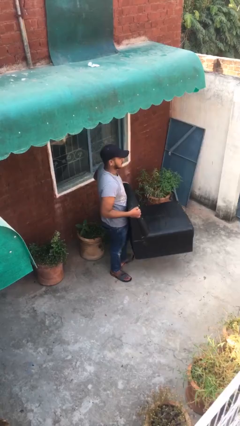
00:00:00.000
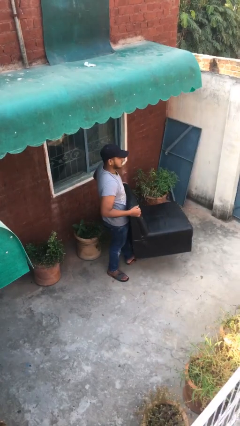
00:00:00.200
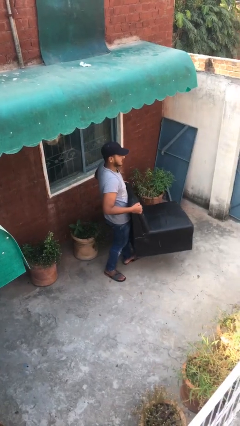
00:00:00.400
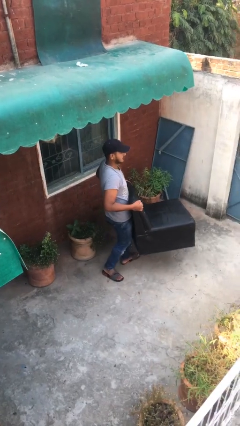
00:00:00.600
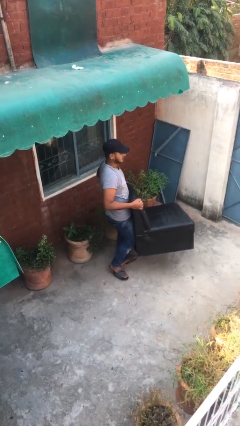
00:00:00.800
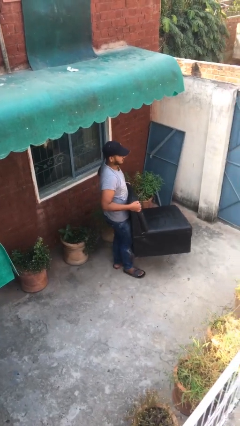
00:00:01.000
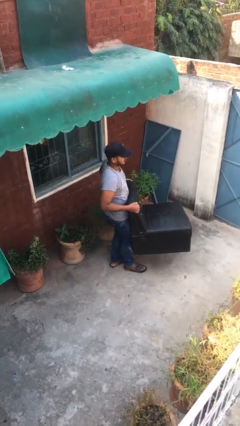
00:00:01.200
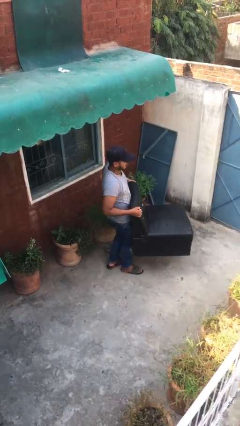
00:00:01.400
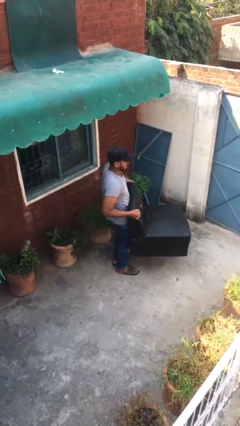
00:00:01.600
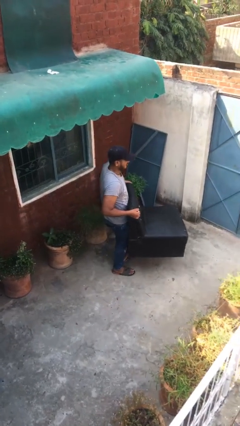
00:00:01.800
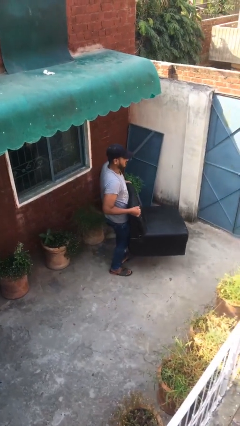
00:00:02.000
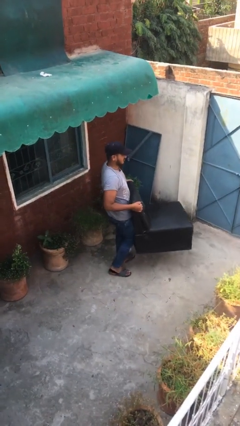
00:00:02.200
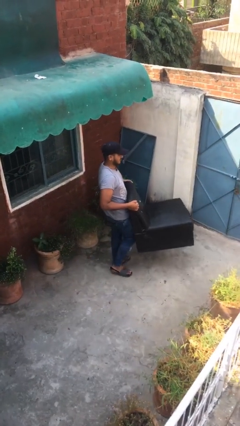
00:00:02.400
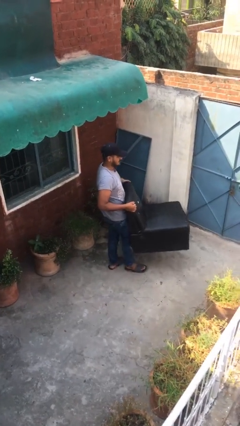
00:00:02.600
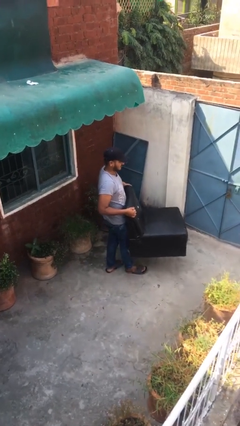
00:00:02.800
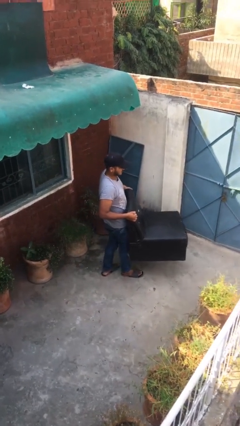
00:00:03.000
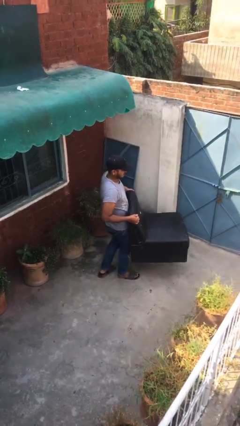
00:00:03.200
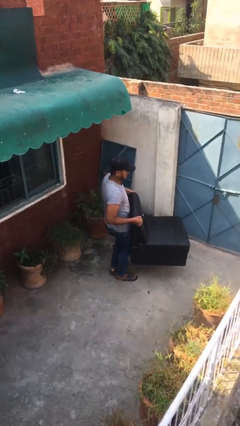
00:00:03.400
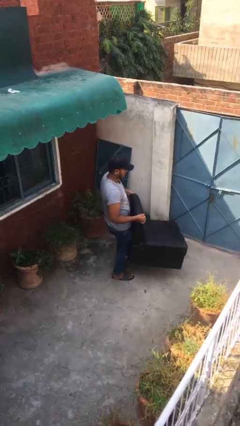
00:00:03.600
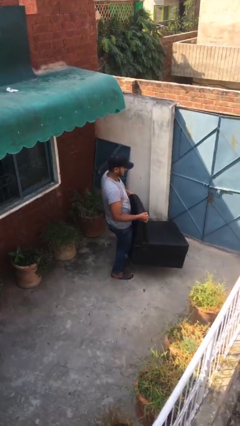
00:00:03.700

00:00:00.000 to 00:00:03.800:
person carries heavy object

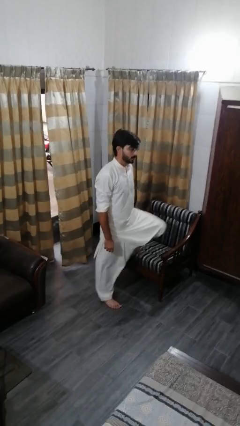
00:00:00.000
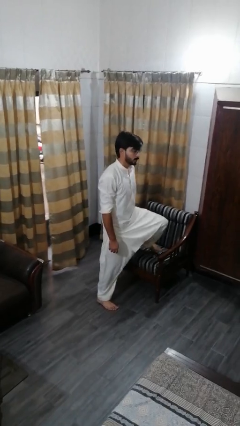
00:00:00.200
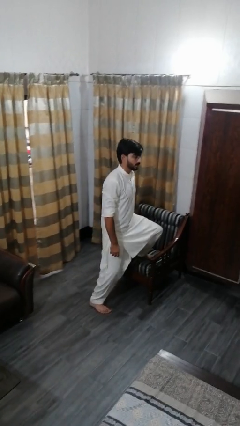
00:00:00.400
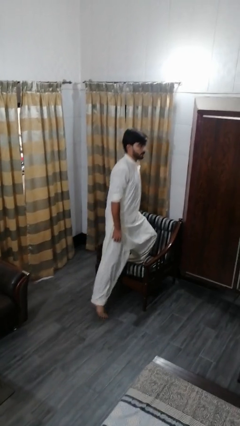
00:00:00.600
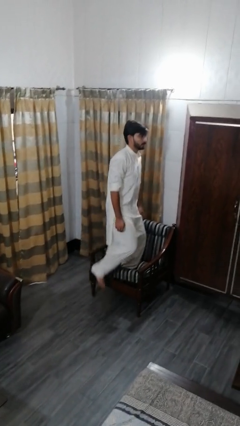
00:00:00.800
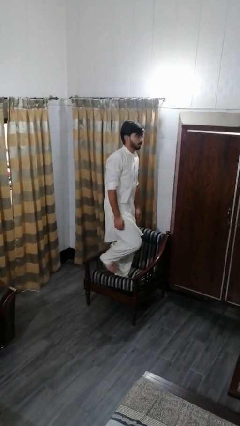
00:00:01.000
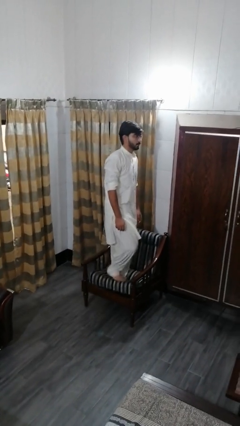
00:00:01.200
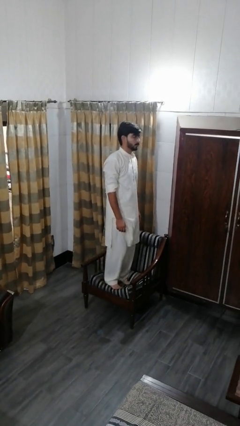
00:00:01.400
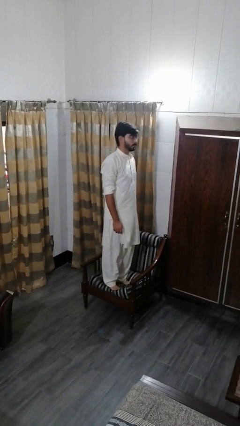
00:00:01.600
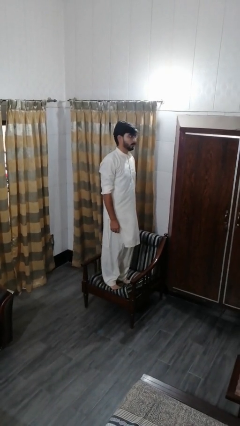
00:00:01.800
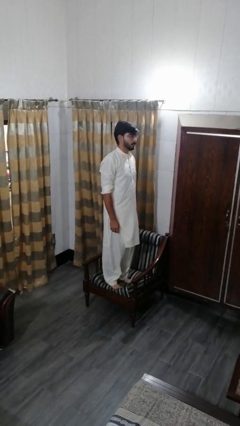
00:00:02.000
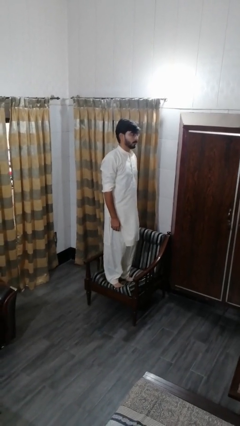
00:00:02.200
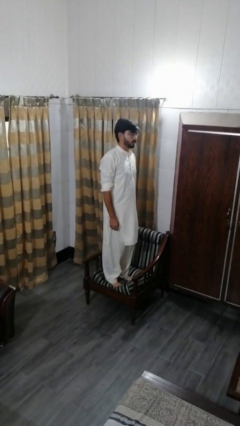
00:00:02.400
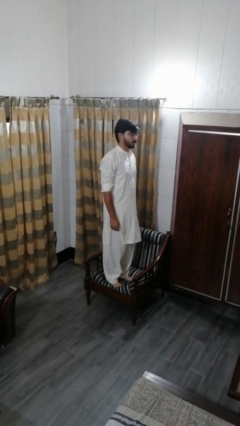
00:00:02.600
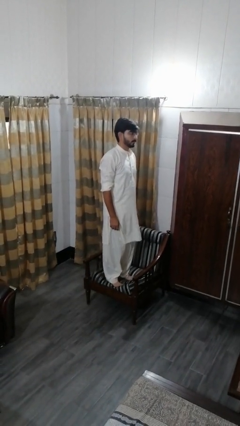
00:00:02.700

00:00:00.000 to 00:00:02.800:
person climbs on chair

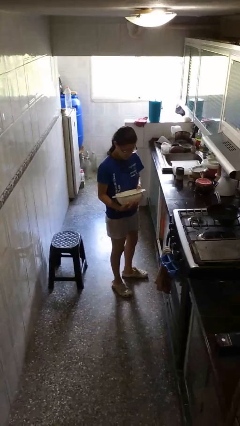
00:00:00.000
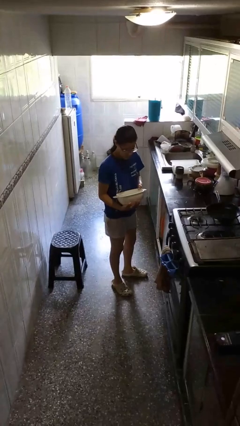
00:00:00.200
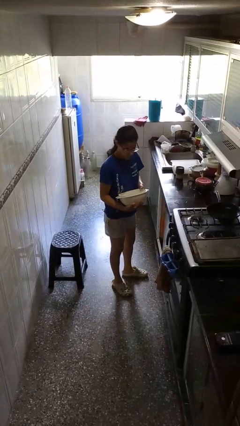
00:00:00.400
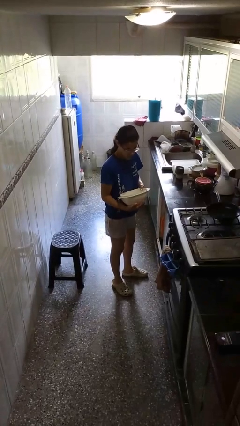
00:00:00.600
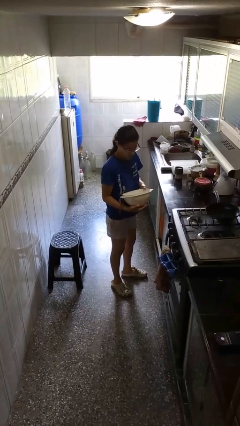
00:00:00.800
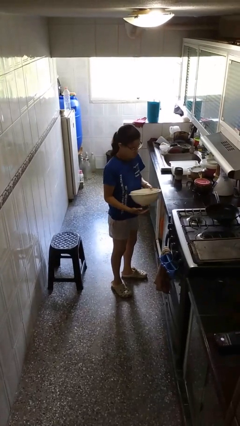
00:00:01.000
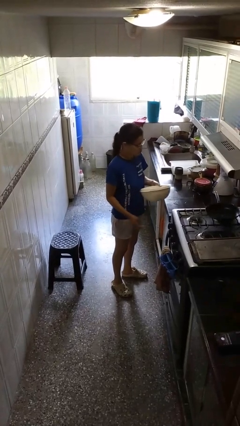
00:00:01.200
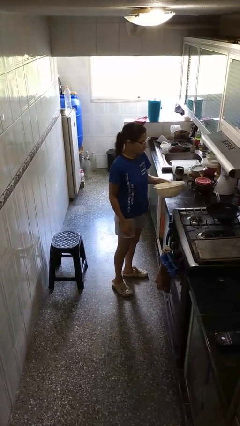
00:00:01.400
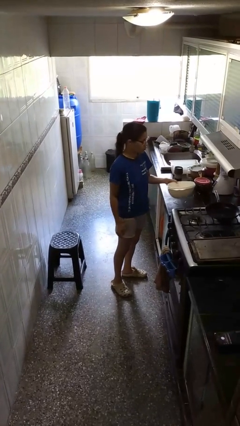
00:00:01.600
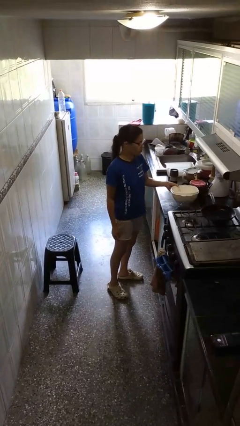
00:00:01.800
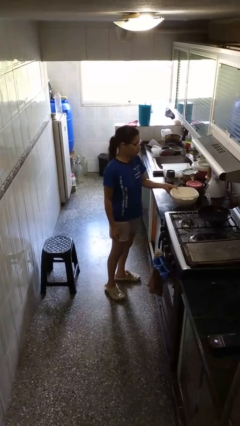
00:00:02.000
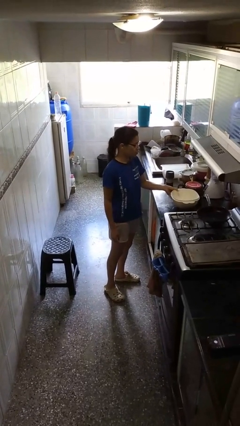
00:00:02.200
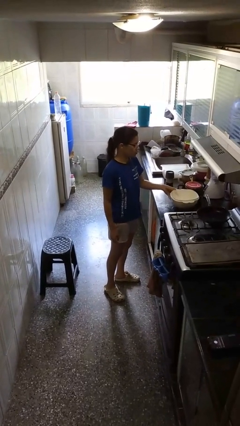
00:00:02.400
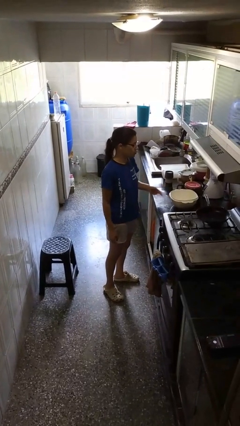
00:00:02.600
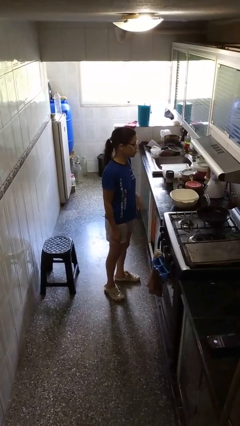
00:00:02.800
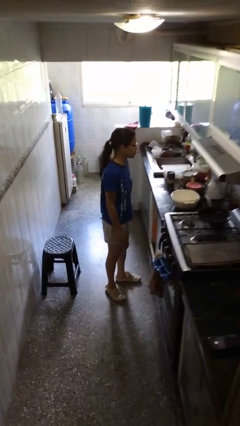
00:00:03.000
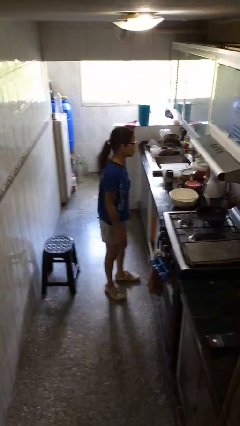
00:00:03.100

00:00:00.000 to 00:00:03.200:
person puts down object on countertop

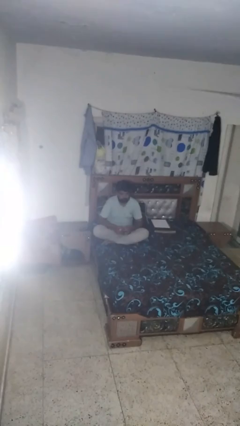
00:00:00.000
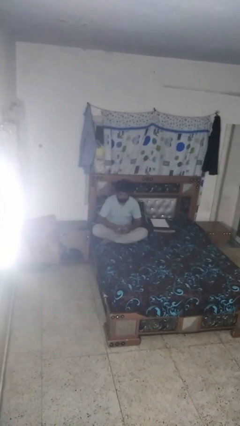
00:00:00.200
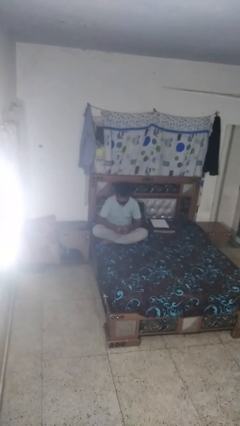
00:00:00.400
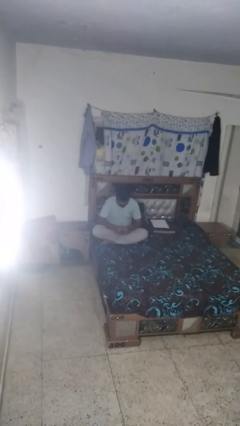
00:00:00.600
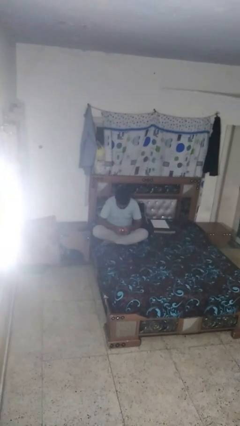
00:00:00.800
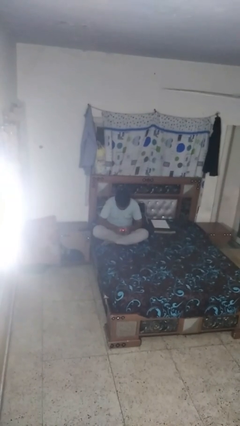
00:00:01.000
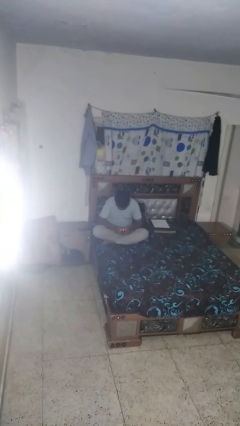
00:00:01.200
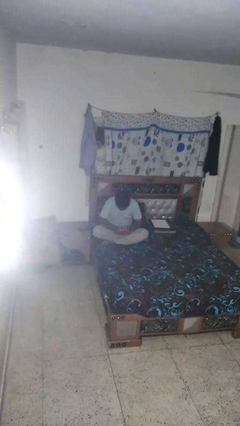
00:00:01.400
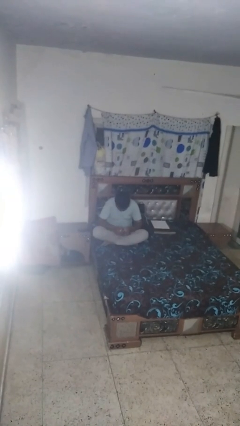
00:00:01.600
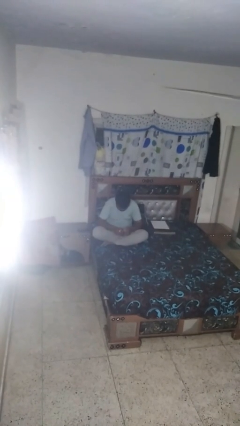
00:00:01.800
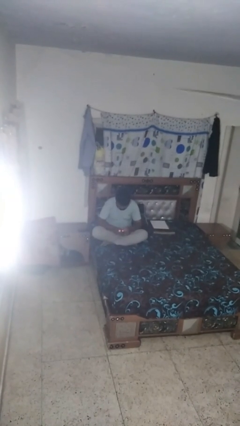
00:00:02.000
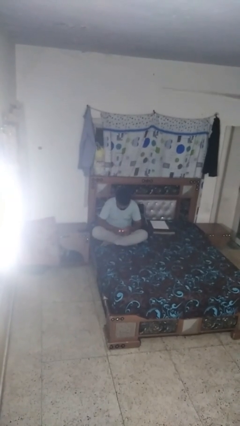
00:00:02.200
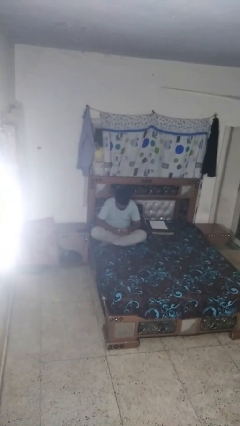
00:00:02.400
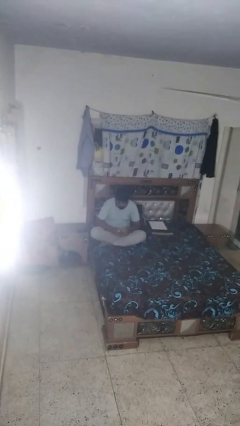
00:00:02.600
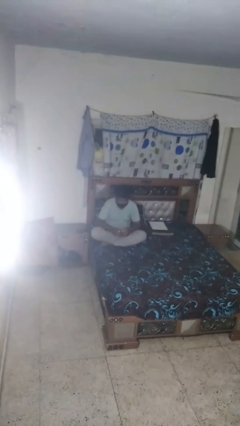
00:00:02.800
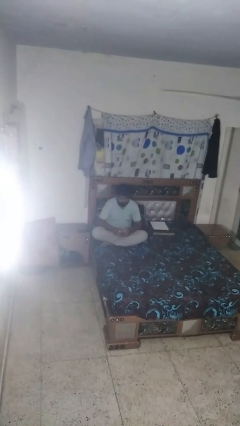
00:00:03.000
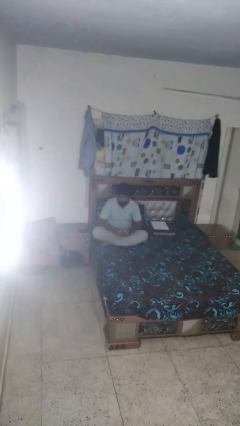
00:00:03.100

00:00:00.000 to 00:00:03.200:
person interacts with handheld game

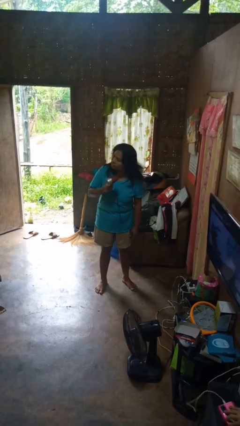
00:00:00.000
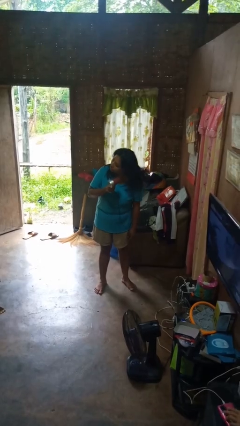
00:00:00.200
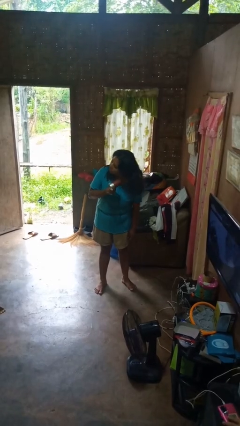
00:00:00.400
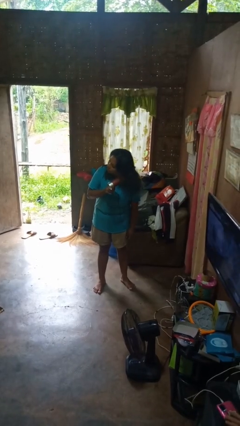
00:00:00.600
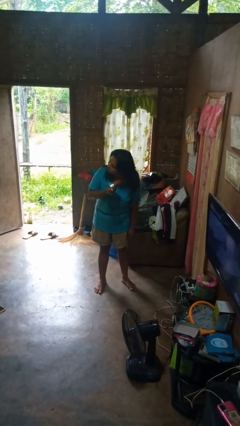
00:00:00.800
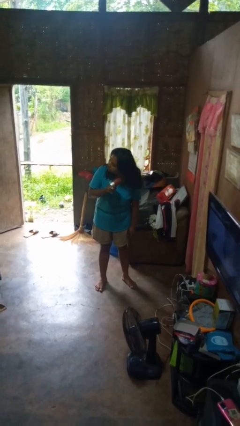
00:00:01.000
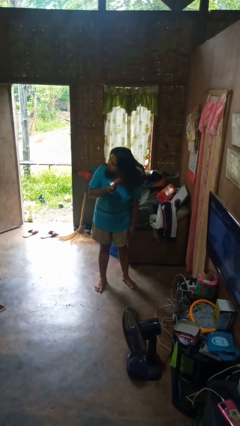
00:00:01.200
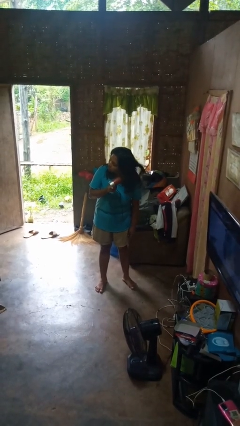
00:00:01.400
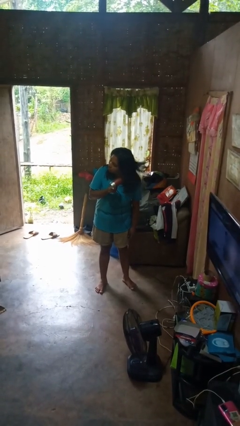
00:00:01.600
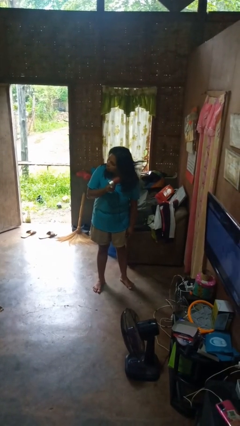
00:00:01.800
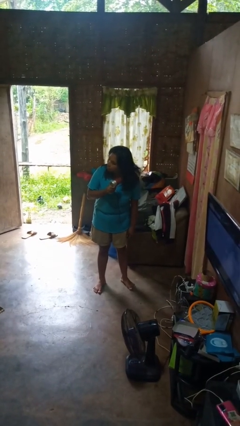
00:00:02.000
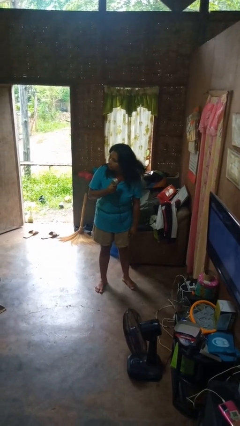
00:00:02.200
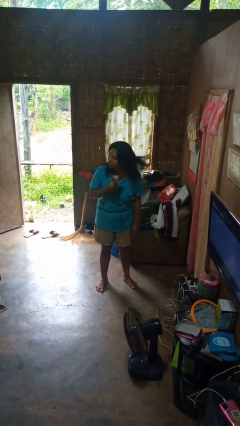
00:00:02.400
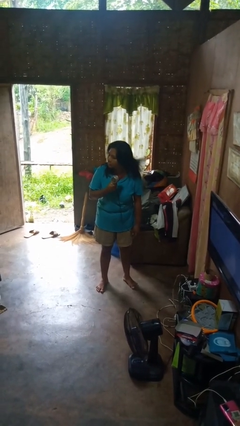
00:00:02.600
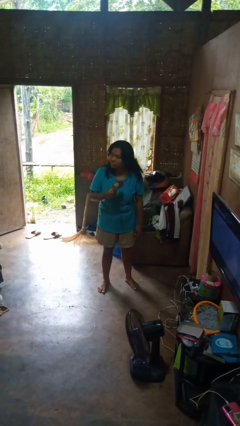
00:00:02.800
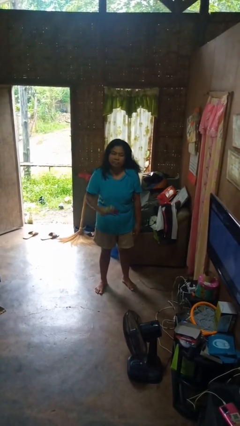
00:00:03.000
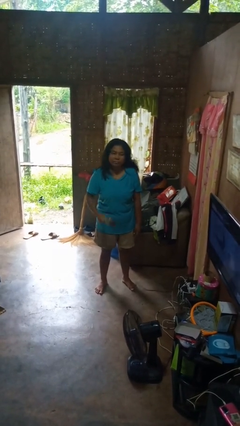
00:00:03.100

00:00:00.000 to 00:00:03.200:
person dries hair with hairdryer

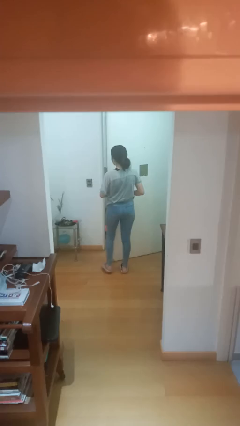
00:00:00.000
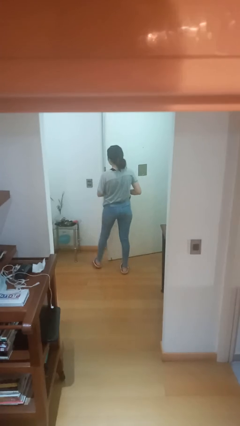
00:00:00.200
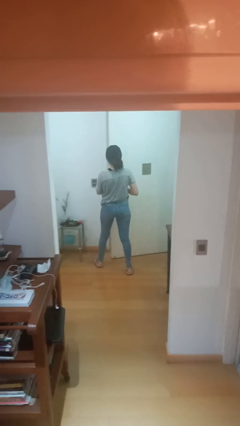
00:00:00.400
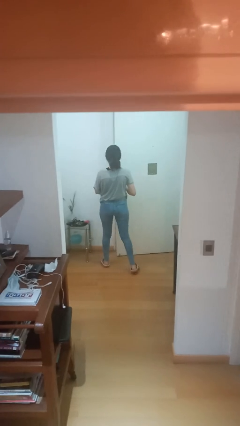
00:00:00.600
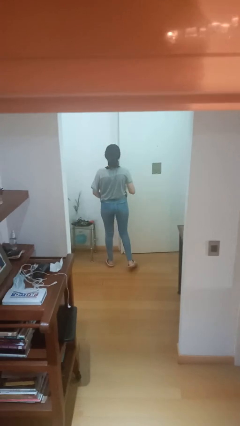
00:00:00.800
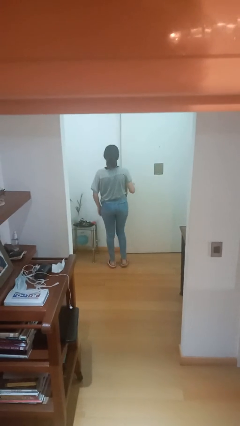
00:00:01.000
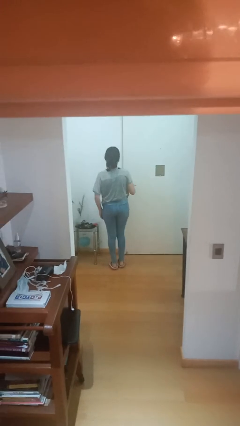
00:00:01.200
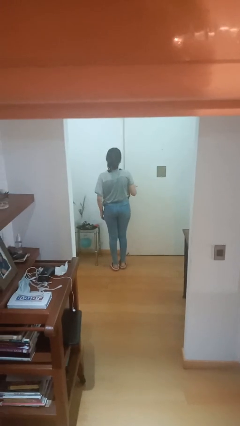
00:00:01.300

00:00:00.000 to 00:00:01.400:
person closes facility door

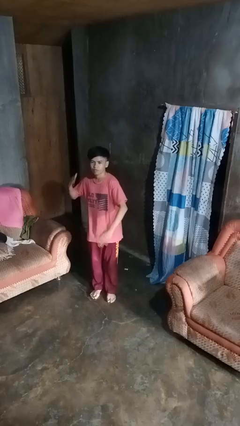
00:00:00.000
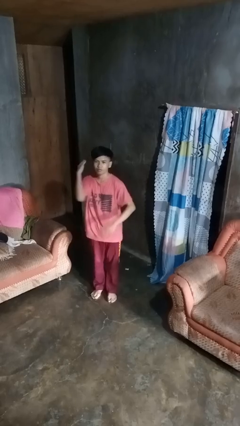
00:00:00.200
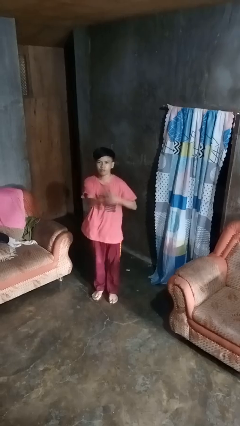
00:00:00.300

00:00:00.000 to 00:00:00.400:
person karate chop
